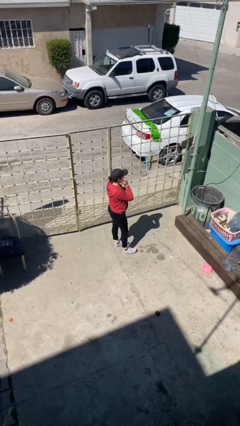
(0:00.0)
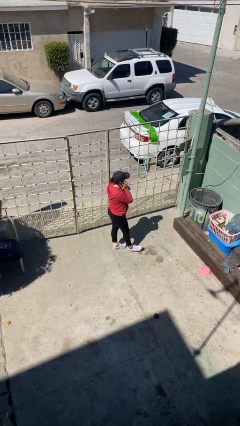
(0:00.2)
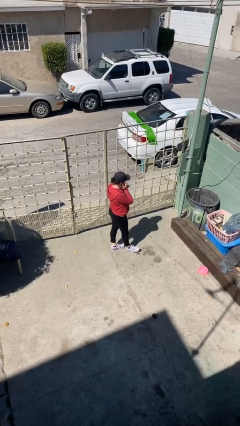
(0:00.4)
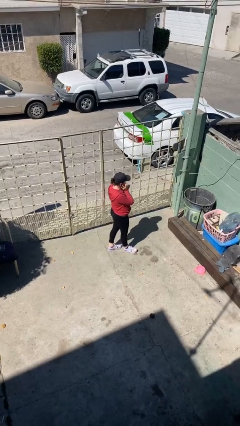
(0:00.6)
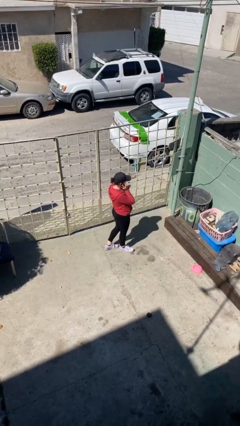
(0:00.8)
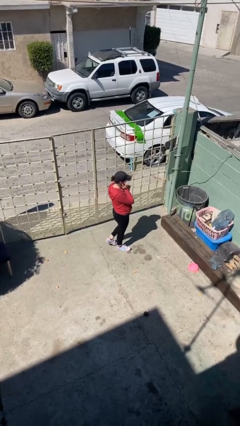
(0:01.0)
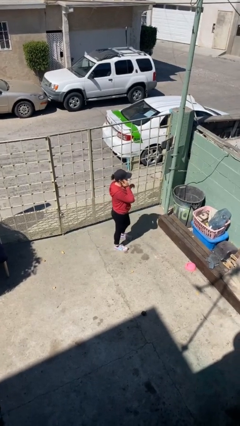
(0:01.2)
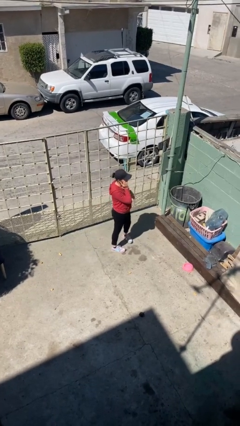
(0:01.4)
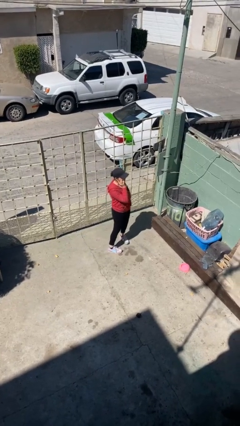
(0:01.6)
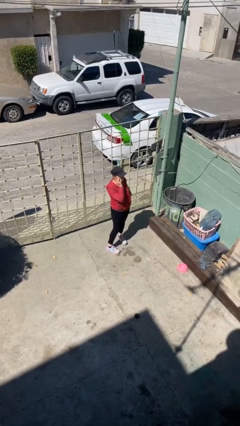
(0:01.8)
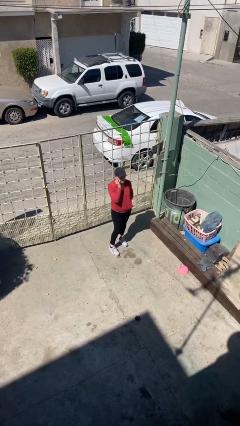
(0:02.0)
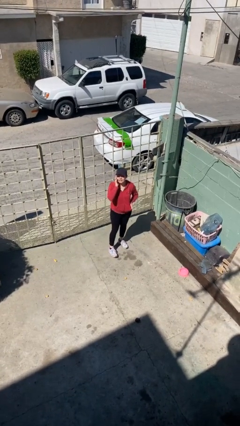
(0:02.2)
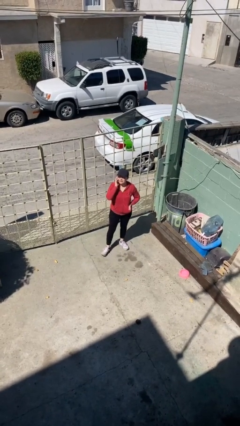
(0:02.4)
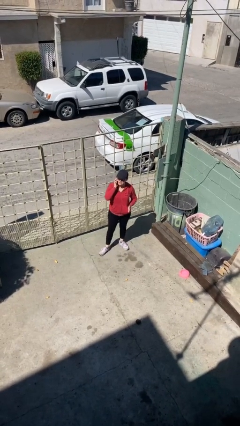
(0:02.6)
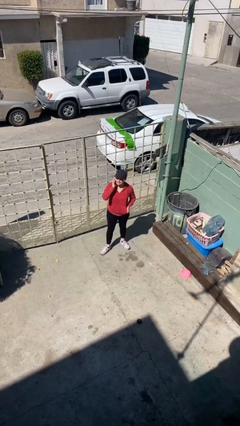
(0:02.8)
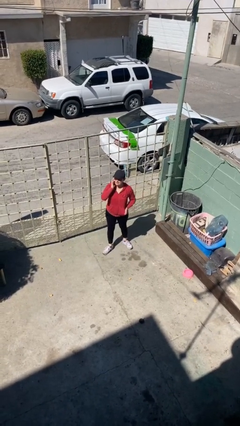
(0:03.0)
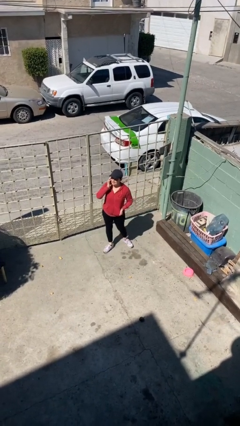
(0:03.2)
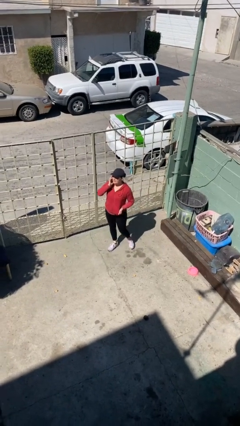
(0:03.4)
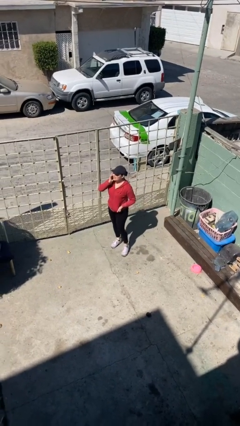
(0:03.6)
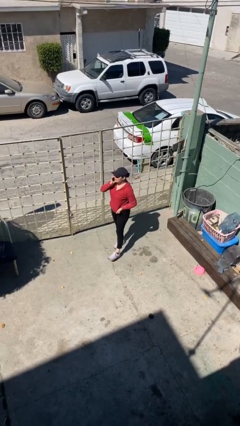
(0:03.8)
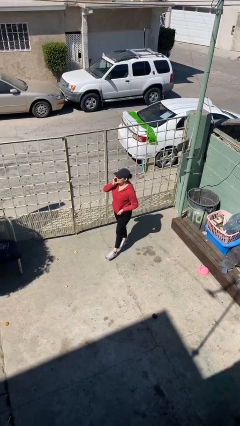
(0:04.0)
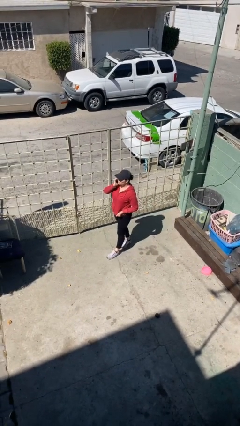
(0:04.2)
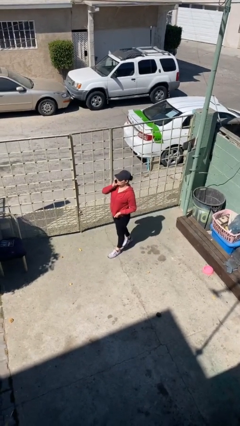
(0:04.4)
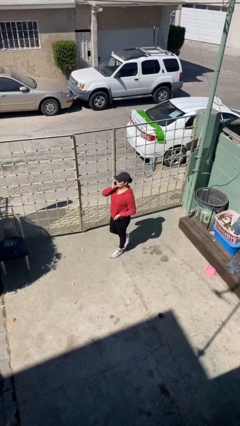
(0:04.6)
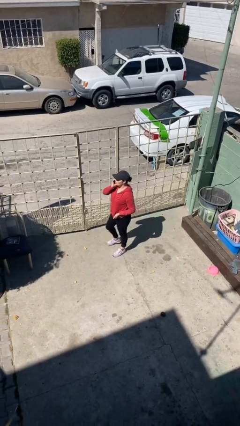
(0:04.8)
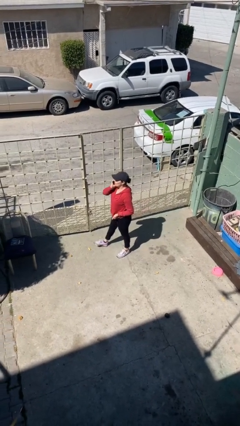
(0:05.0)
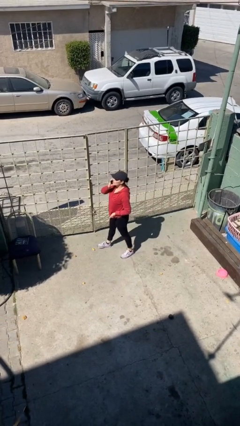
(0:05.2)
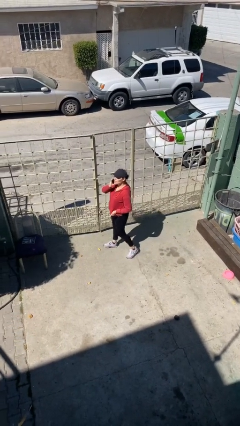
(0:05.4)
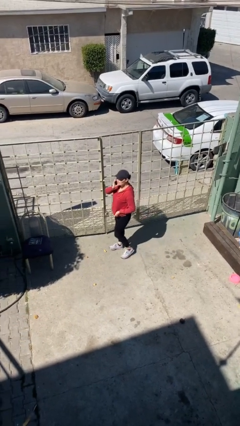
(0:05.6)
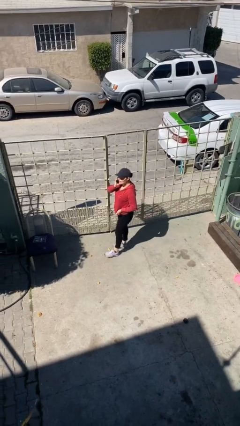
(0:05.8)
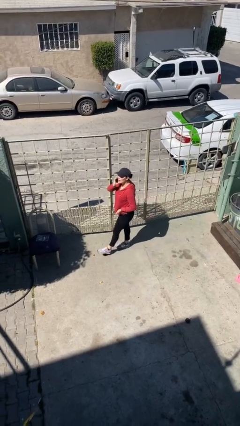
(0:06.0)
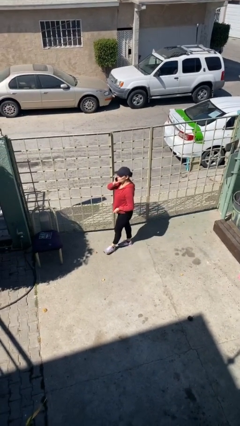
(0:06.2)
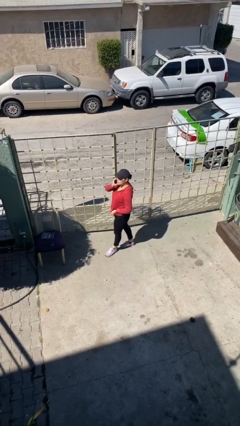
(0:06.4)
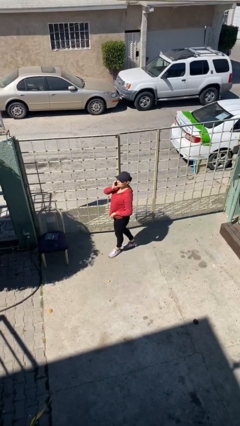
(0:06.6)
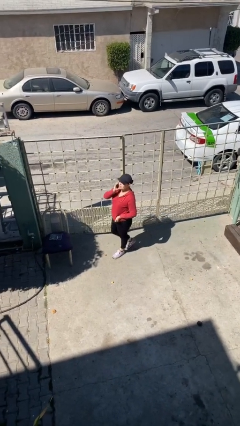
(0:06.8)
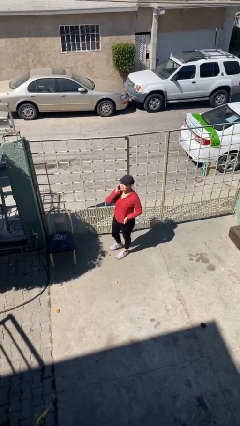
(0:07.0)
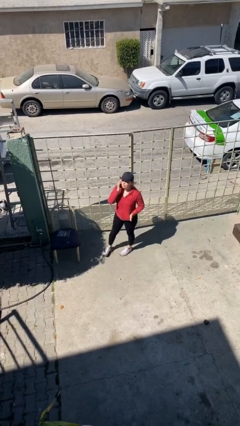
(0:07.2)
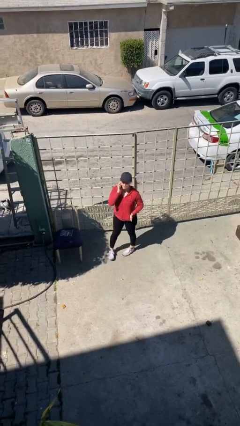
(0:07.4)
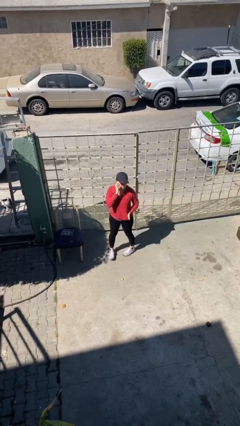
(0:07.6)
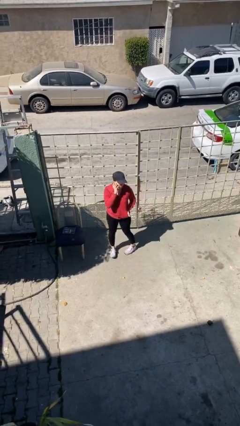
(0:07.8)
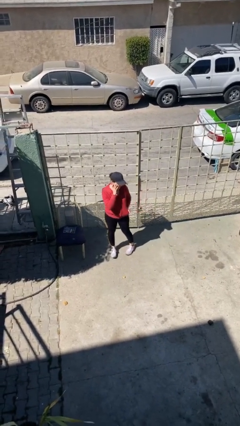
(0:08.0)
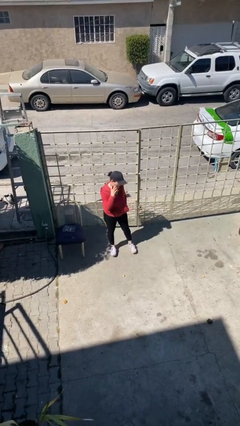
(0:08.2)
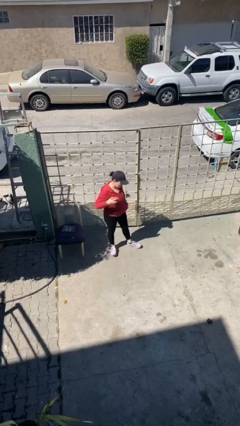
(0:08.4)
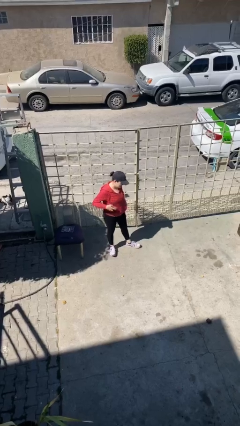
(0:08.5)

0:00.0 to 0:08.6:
person talks on phone

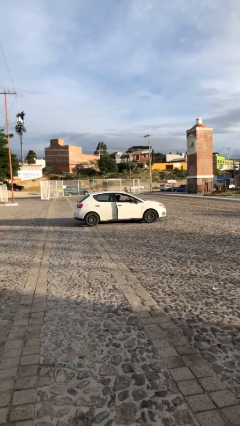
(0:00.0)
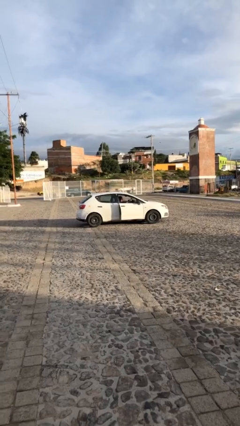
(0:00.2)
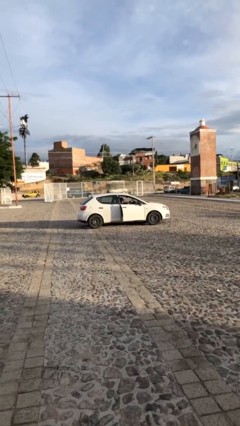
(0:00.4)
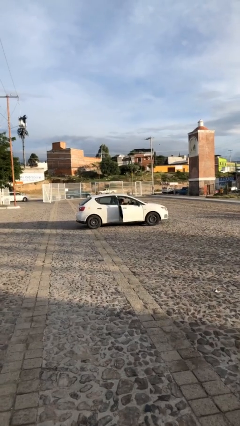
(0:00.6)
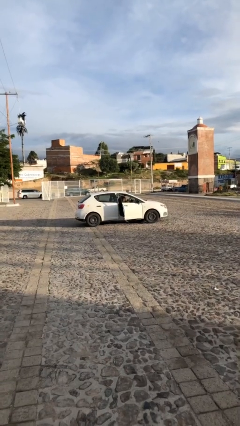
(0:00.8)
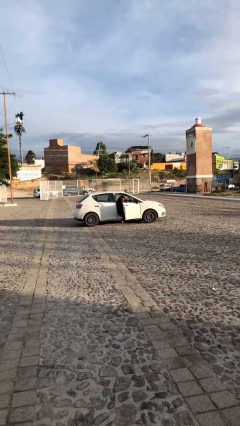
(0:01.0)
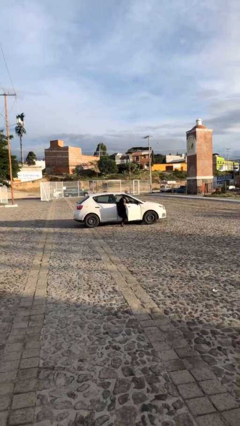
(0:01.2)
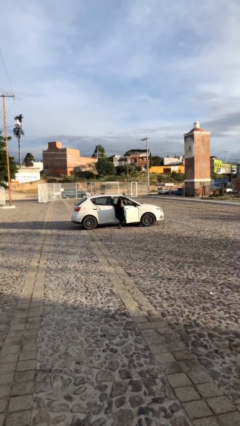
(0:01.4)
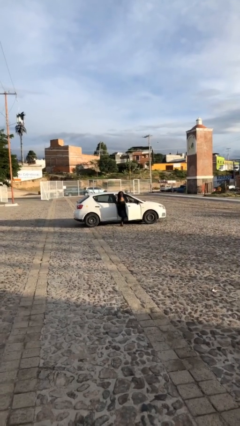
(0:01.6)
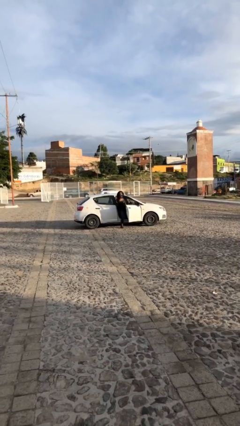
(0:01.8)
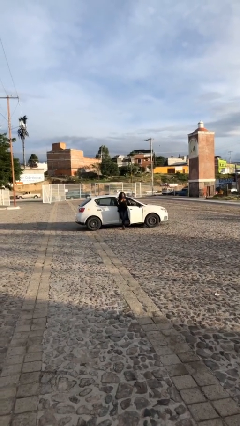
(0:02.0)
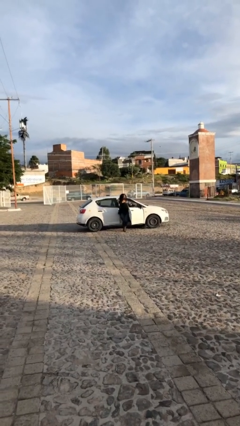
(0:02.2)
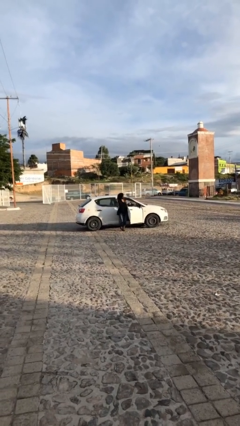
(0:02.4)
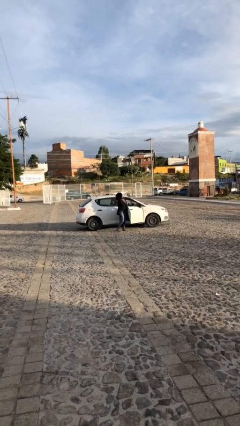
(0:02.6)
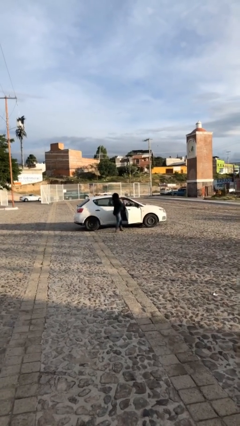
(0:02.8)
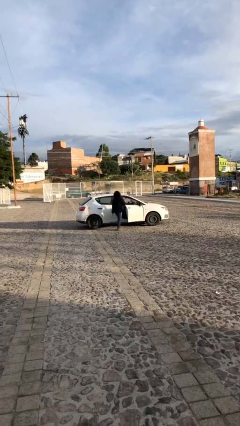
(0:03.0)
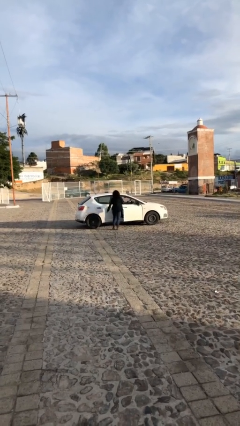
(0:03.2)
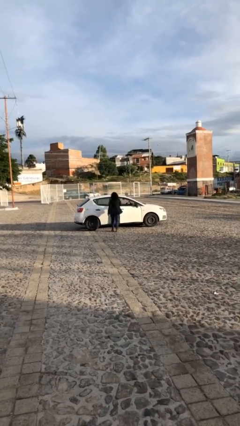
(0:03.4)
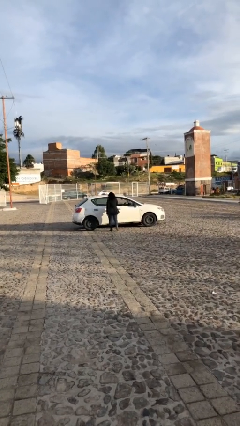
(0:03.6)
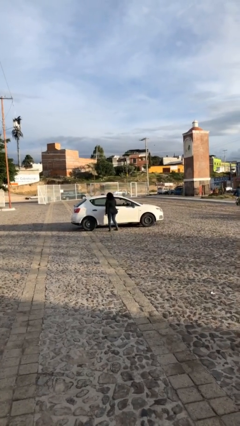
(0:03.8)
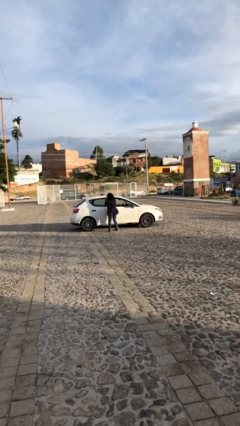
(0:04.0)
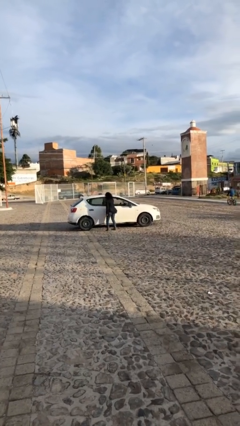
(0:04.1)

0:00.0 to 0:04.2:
car drops off person

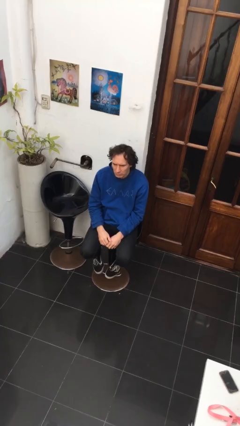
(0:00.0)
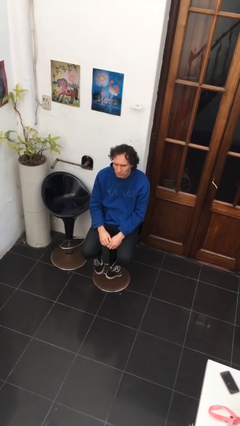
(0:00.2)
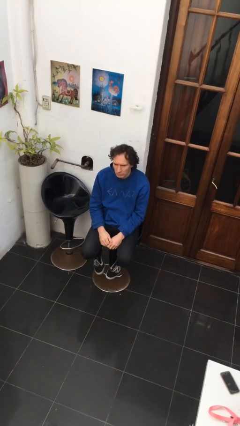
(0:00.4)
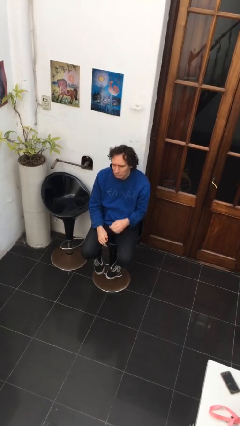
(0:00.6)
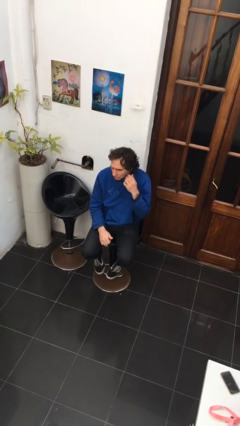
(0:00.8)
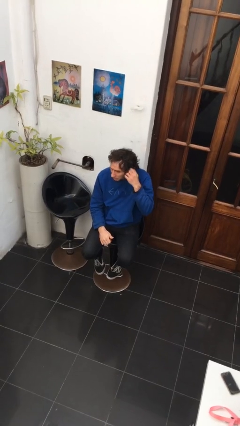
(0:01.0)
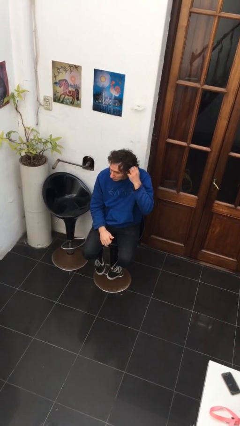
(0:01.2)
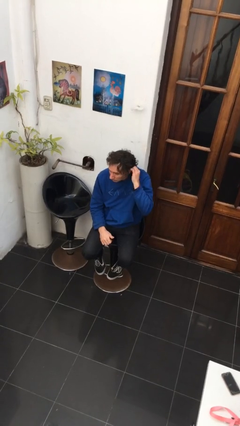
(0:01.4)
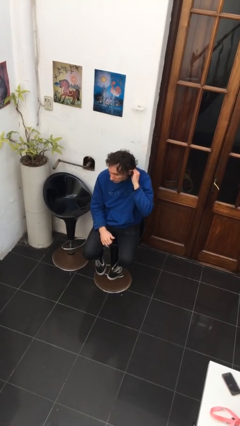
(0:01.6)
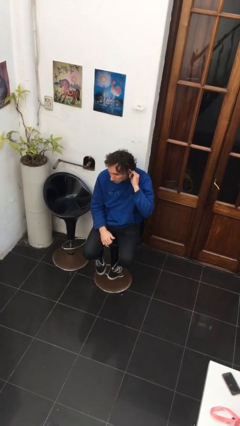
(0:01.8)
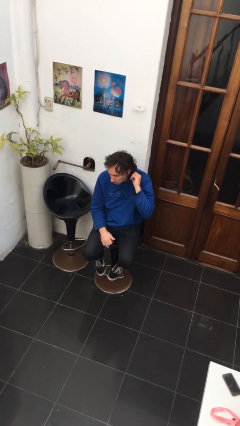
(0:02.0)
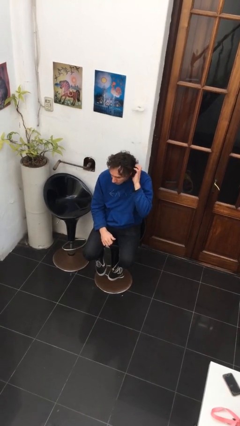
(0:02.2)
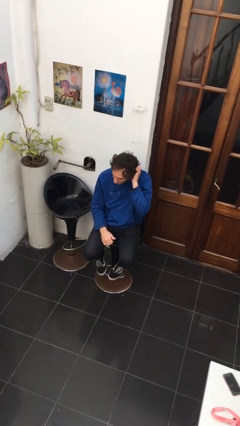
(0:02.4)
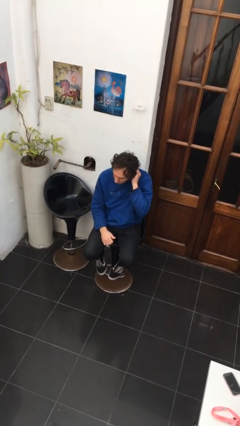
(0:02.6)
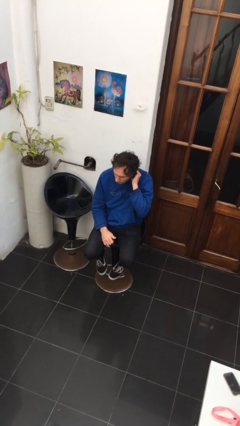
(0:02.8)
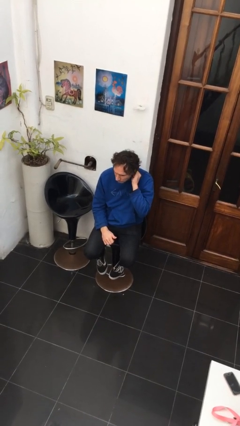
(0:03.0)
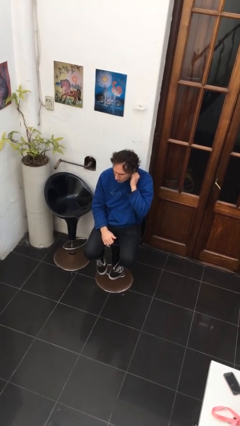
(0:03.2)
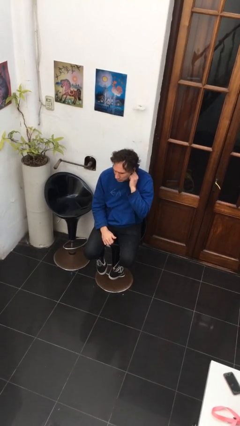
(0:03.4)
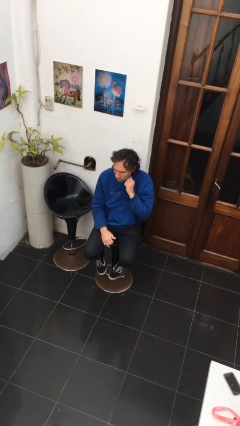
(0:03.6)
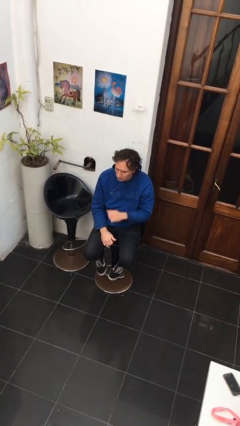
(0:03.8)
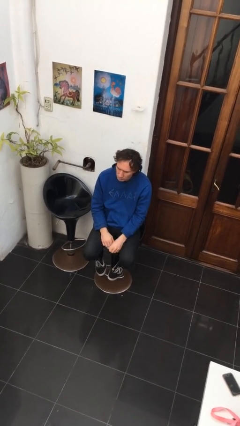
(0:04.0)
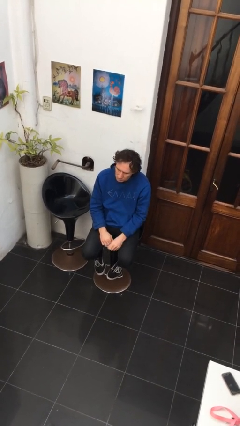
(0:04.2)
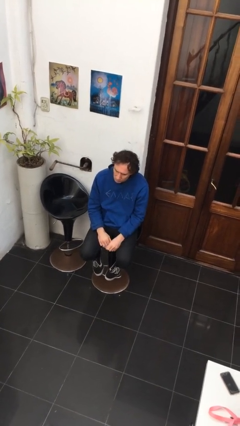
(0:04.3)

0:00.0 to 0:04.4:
person strokes hair

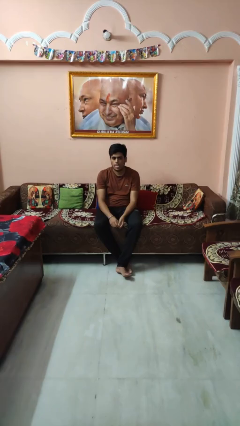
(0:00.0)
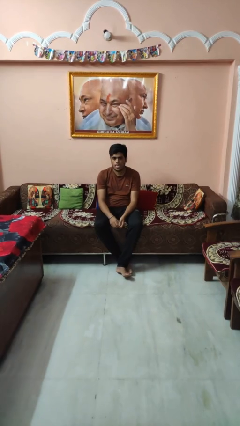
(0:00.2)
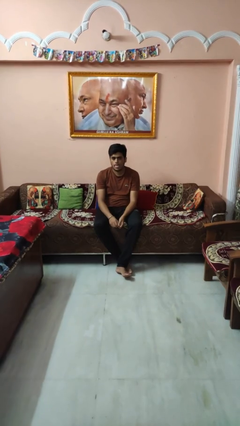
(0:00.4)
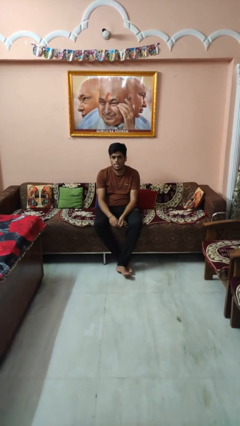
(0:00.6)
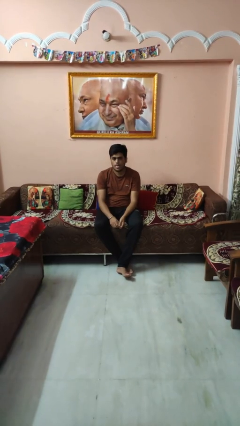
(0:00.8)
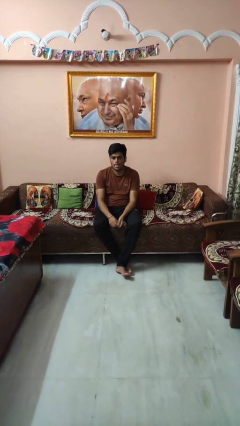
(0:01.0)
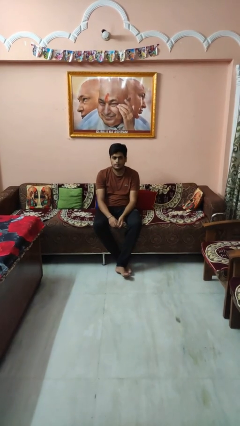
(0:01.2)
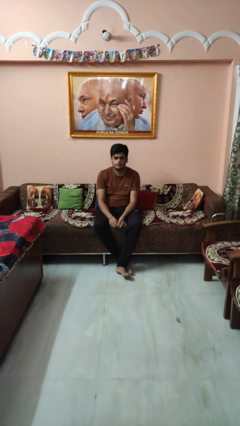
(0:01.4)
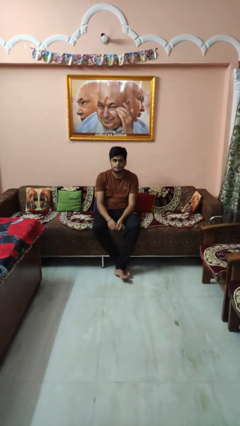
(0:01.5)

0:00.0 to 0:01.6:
person sticks out tongue
